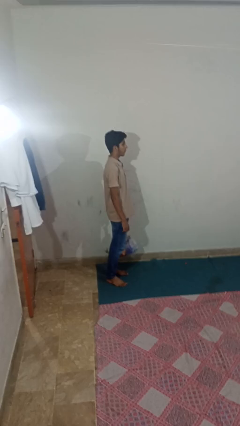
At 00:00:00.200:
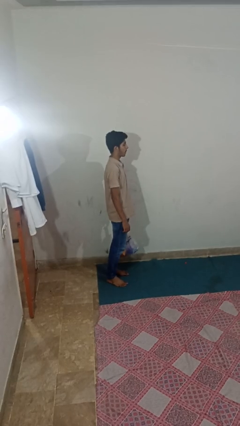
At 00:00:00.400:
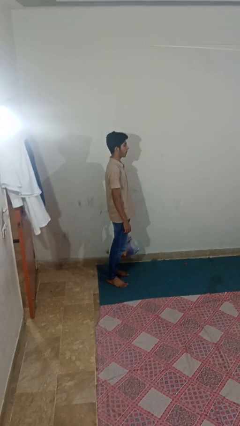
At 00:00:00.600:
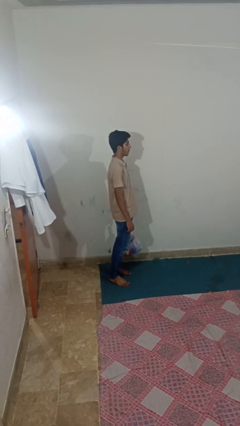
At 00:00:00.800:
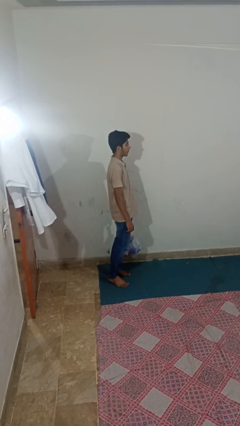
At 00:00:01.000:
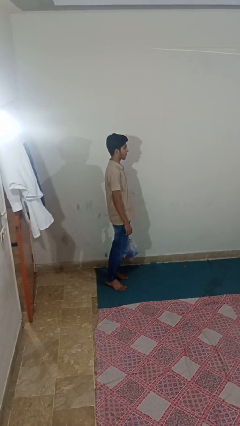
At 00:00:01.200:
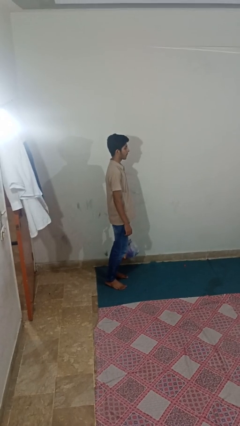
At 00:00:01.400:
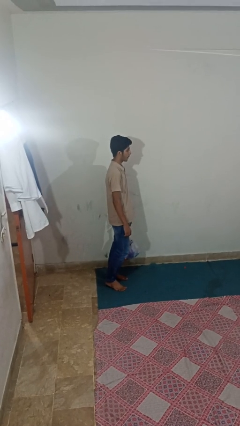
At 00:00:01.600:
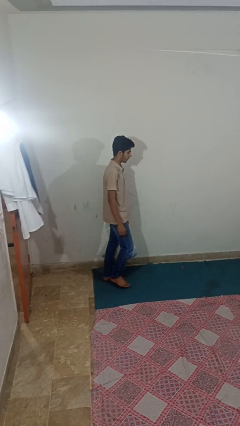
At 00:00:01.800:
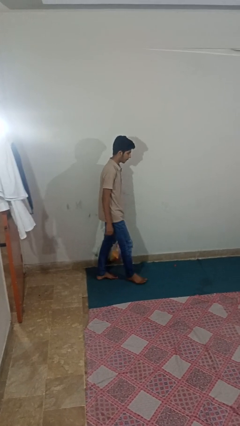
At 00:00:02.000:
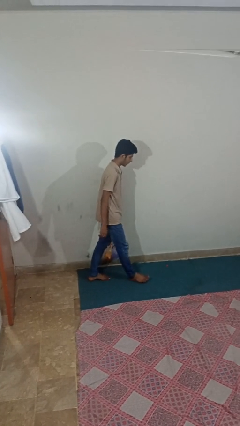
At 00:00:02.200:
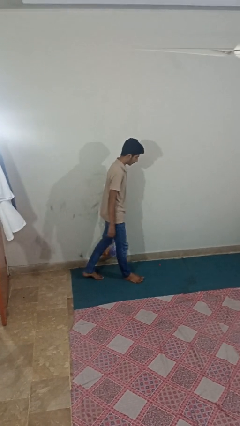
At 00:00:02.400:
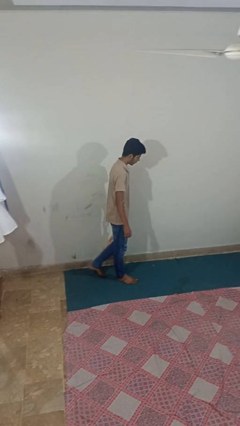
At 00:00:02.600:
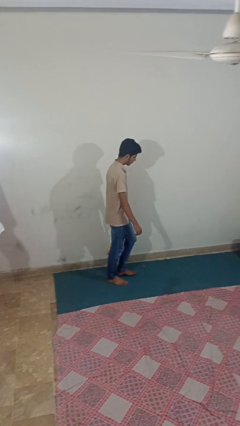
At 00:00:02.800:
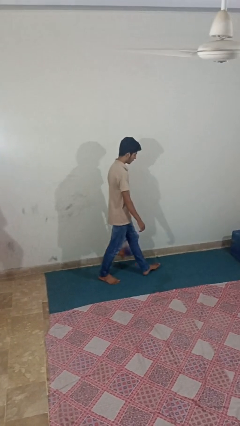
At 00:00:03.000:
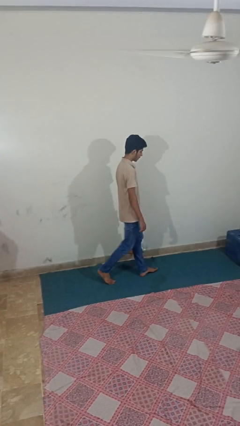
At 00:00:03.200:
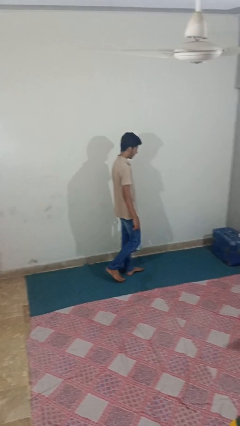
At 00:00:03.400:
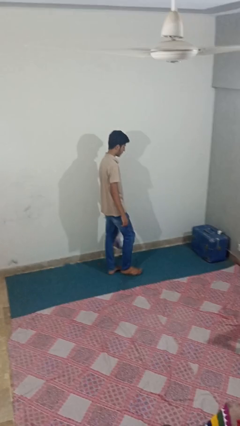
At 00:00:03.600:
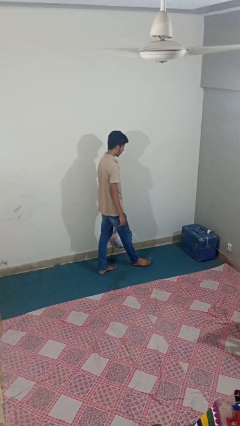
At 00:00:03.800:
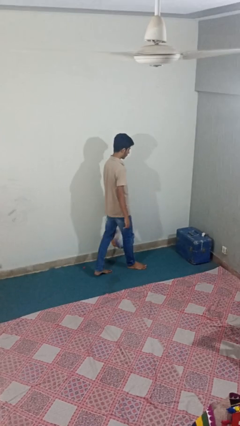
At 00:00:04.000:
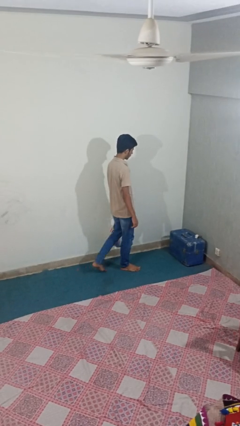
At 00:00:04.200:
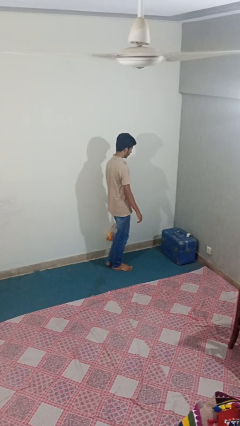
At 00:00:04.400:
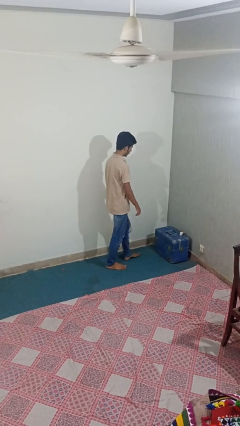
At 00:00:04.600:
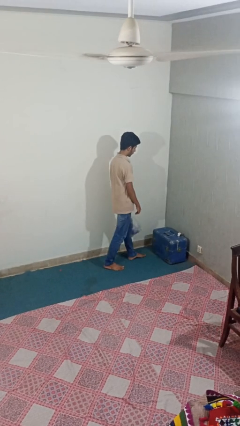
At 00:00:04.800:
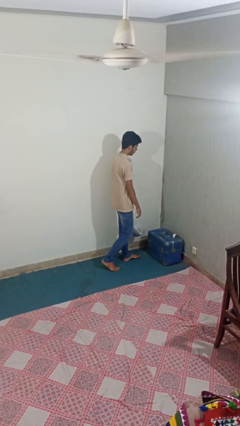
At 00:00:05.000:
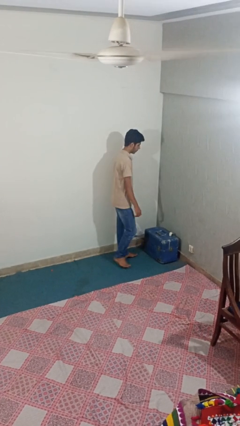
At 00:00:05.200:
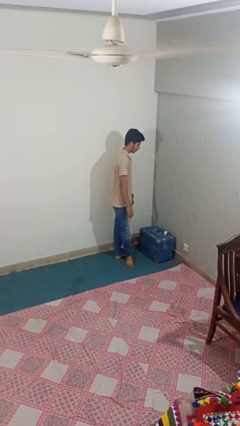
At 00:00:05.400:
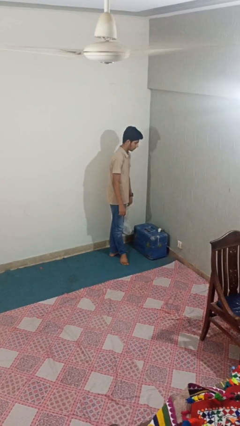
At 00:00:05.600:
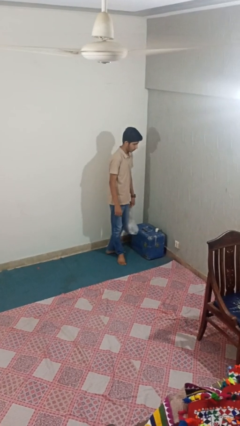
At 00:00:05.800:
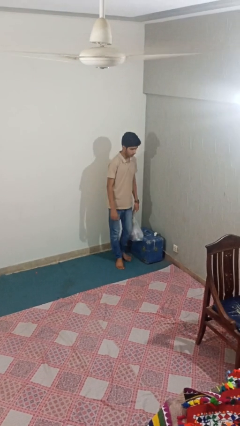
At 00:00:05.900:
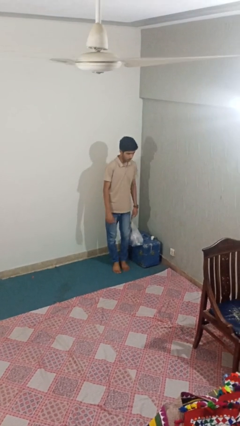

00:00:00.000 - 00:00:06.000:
person carries groceries

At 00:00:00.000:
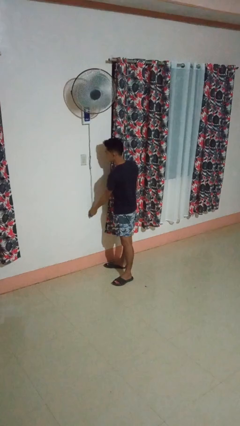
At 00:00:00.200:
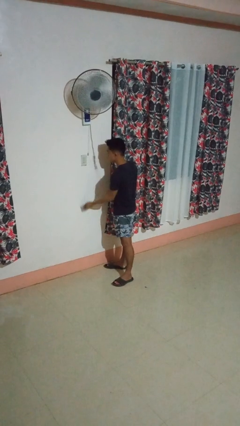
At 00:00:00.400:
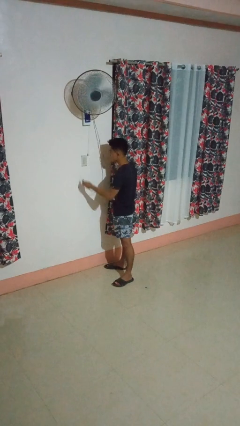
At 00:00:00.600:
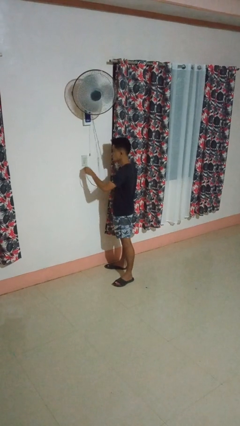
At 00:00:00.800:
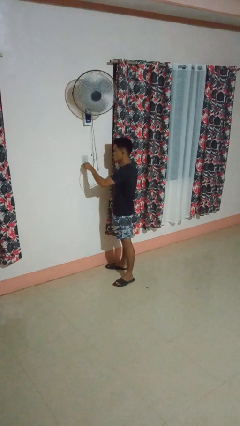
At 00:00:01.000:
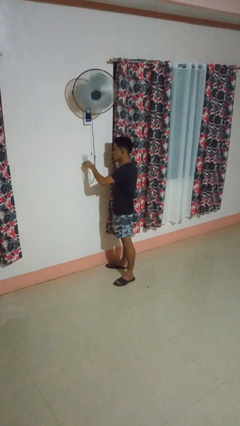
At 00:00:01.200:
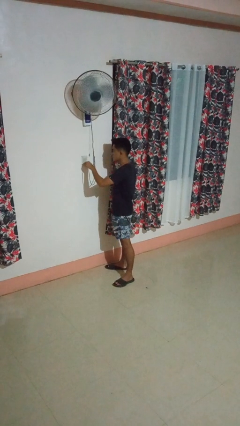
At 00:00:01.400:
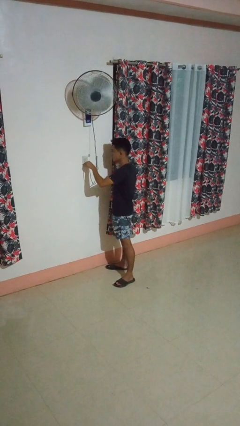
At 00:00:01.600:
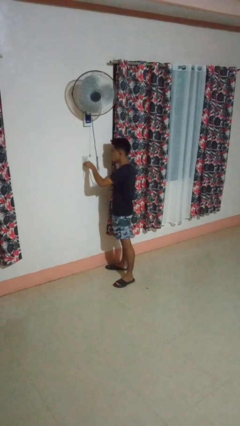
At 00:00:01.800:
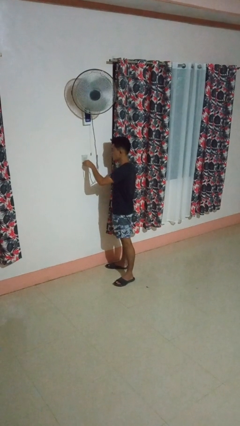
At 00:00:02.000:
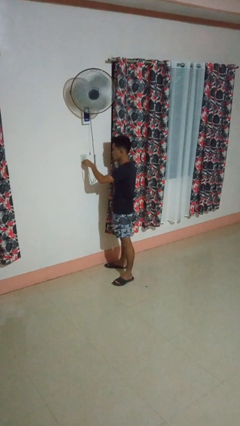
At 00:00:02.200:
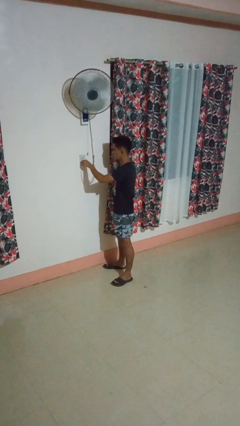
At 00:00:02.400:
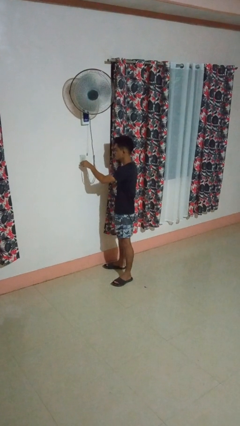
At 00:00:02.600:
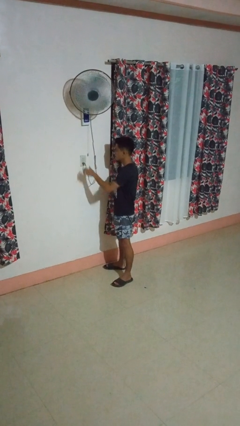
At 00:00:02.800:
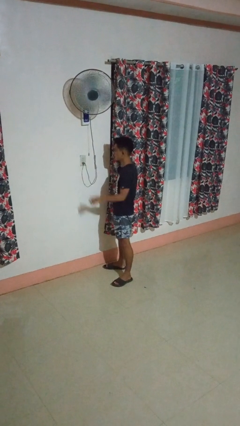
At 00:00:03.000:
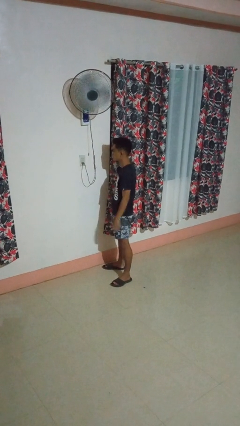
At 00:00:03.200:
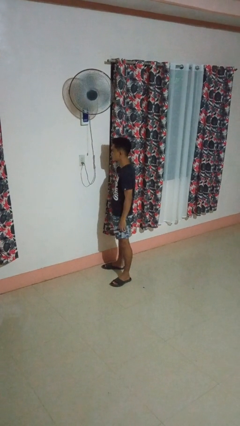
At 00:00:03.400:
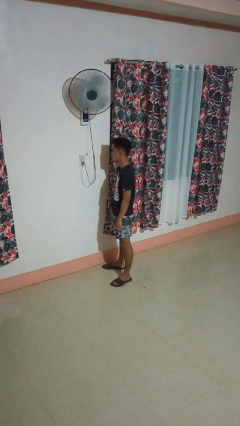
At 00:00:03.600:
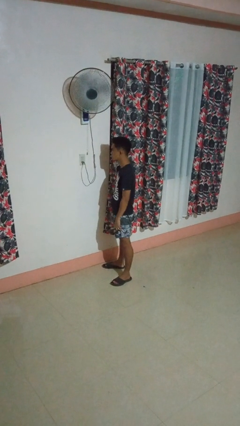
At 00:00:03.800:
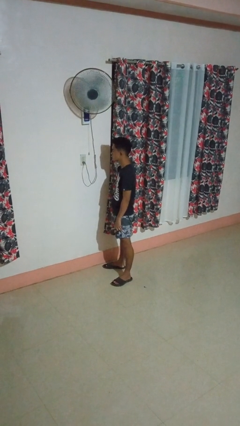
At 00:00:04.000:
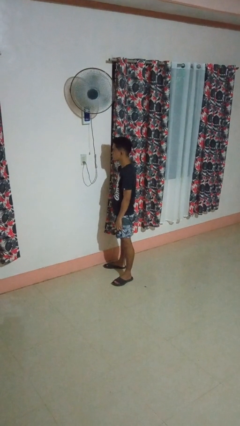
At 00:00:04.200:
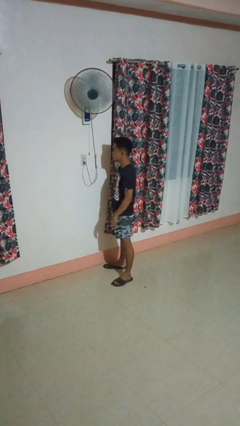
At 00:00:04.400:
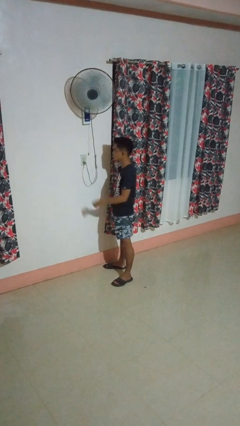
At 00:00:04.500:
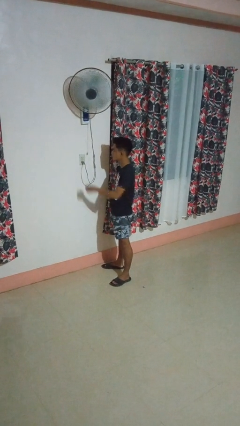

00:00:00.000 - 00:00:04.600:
person plugs into electrical socket

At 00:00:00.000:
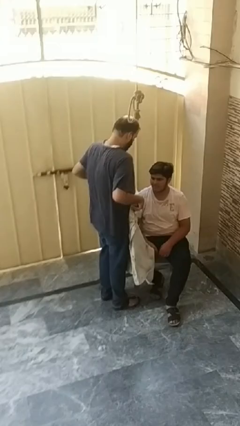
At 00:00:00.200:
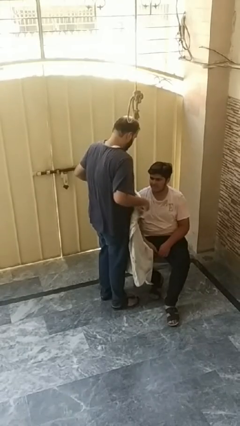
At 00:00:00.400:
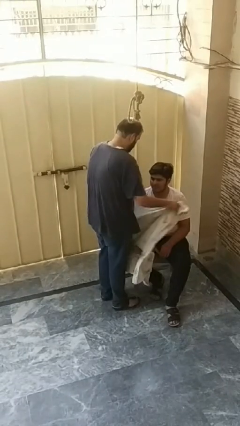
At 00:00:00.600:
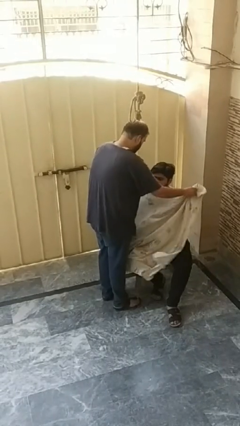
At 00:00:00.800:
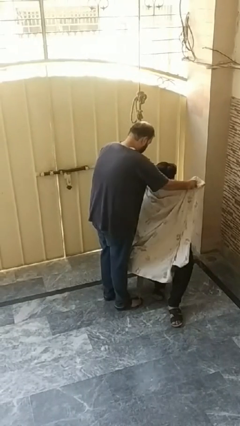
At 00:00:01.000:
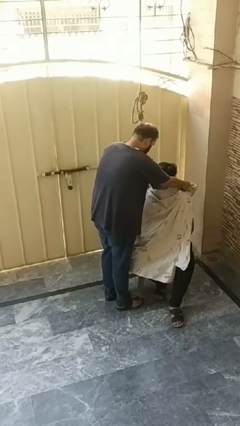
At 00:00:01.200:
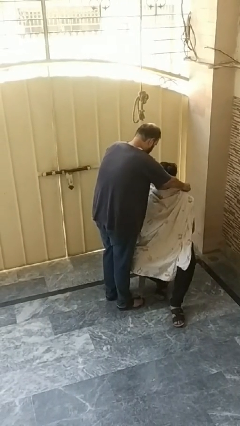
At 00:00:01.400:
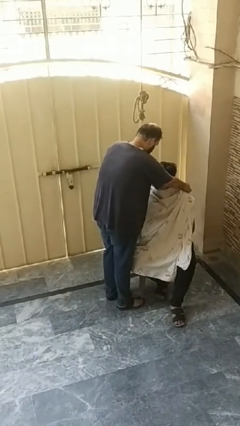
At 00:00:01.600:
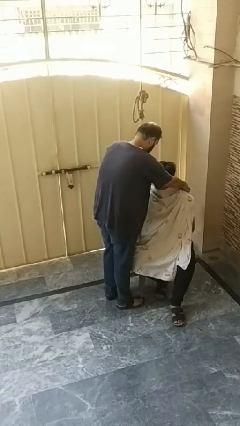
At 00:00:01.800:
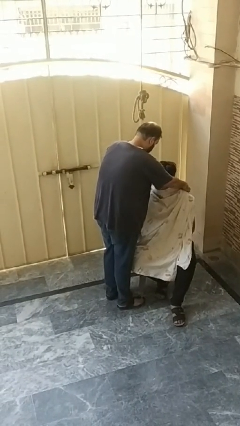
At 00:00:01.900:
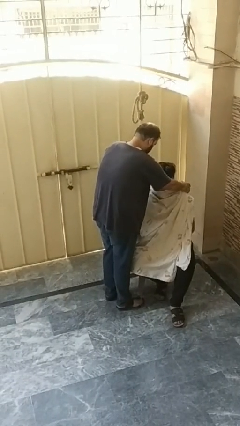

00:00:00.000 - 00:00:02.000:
person covers friend with blanket

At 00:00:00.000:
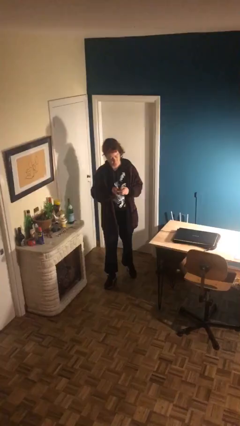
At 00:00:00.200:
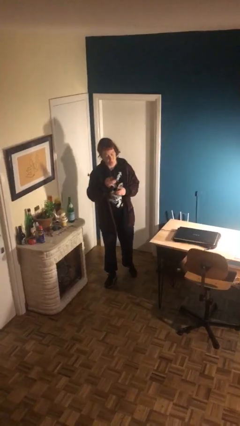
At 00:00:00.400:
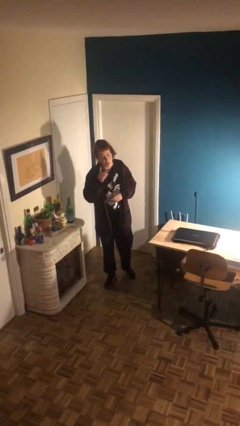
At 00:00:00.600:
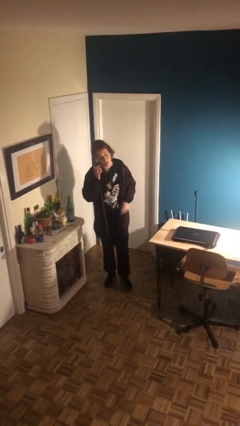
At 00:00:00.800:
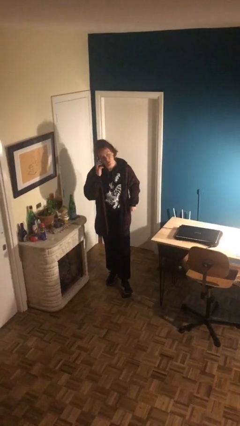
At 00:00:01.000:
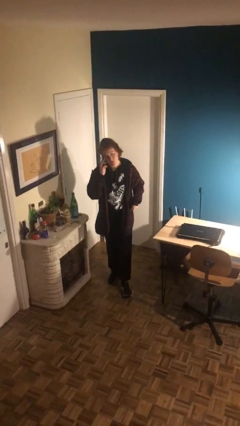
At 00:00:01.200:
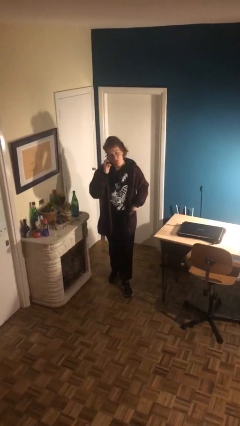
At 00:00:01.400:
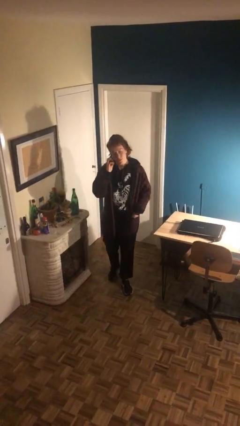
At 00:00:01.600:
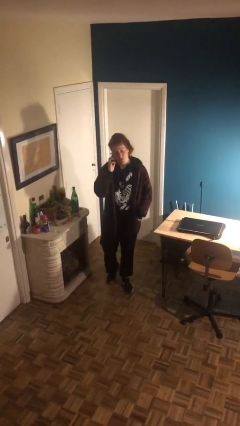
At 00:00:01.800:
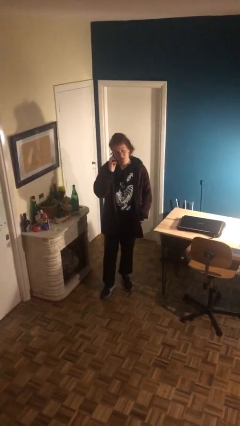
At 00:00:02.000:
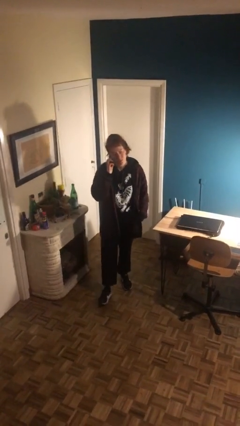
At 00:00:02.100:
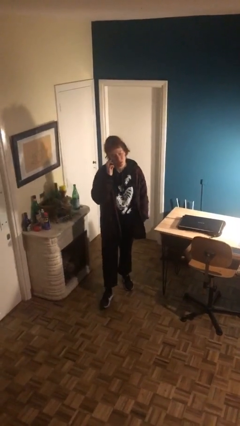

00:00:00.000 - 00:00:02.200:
person talks on phone

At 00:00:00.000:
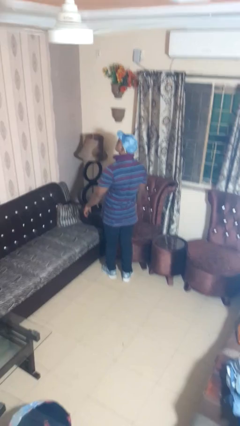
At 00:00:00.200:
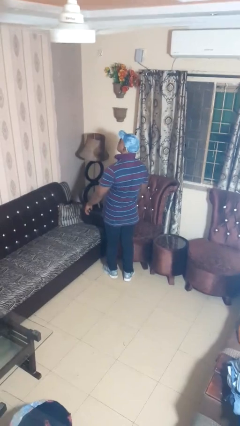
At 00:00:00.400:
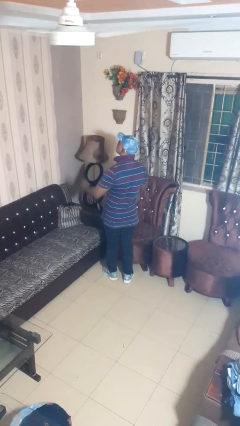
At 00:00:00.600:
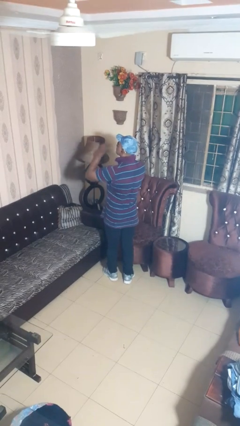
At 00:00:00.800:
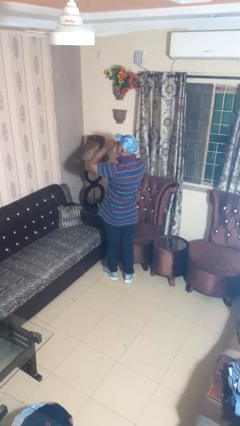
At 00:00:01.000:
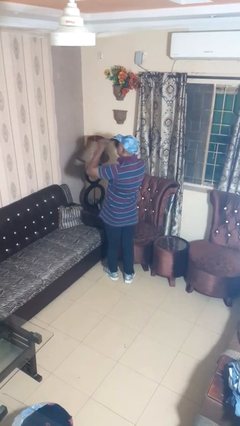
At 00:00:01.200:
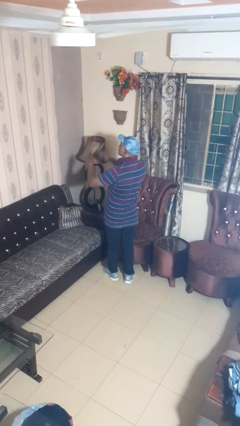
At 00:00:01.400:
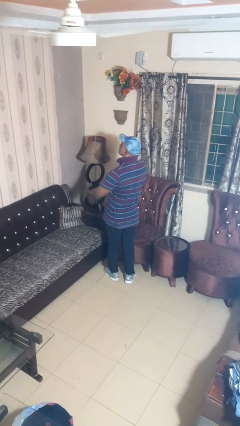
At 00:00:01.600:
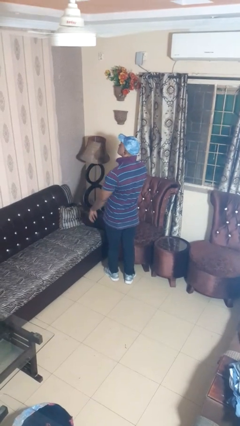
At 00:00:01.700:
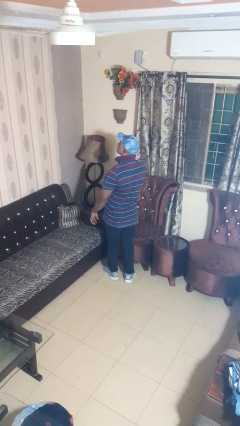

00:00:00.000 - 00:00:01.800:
person takes off sunglasses

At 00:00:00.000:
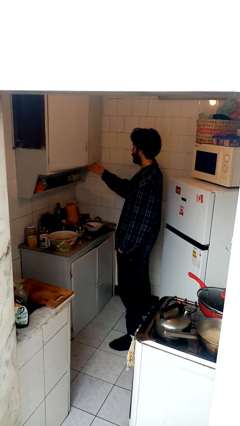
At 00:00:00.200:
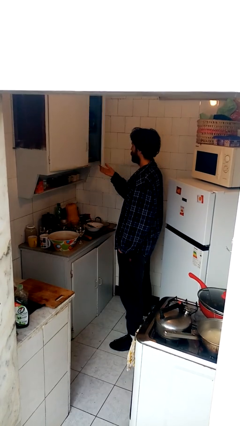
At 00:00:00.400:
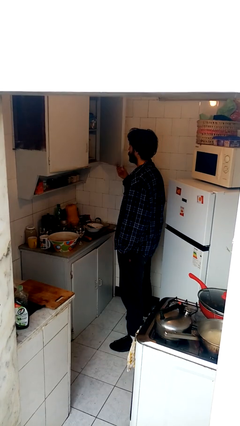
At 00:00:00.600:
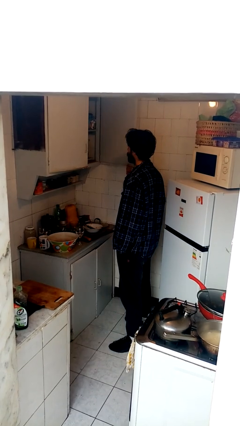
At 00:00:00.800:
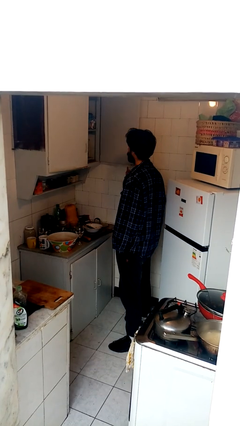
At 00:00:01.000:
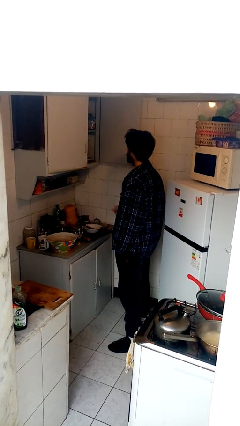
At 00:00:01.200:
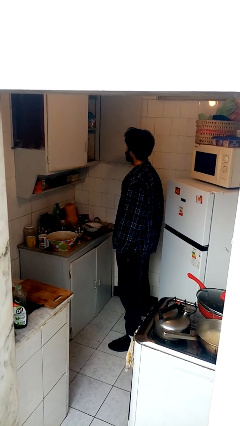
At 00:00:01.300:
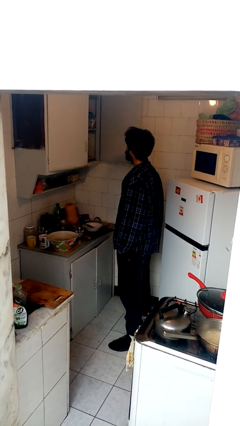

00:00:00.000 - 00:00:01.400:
person opens cabinet
